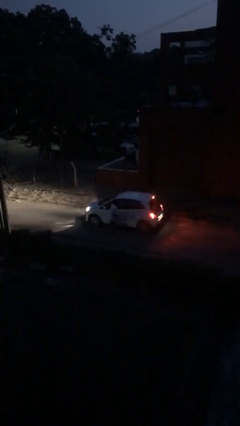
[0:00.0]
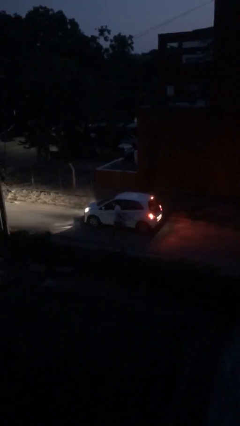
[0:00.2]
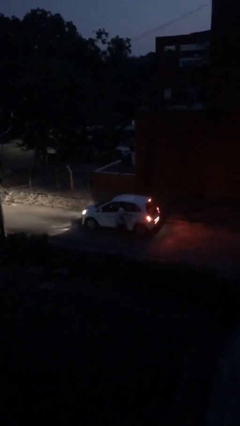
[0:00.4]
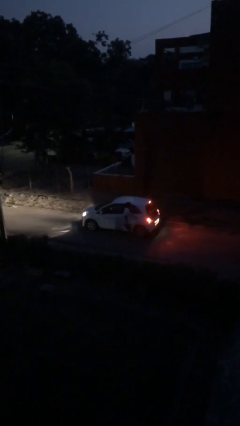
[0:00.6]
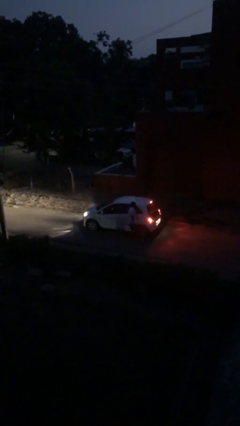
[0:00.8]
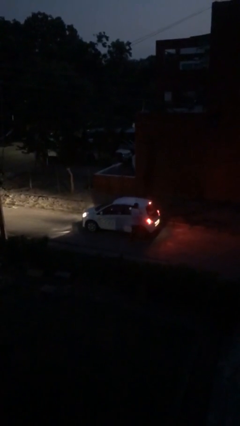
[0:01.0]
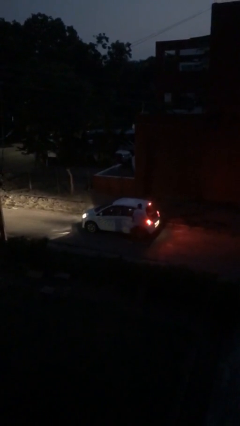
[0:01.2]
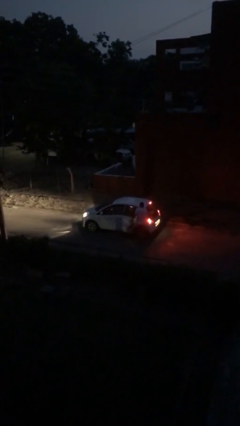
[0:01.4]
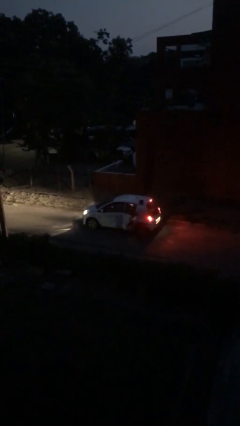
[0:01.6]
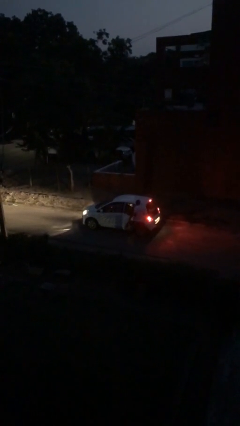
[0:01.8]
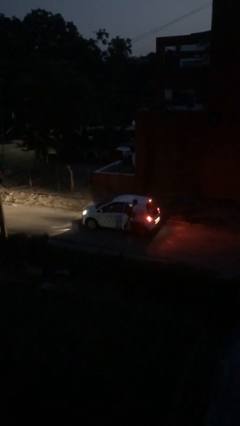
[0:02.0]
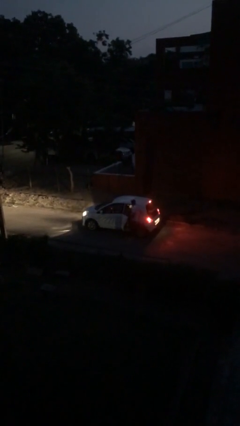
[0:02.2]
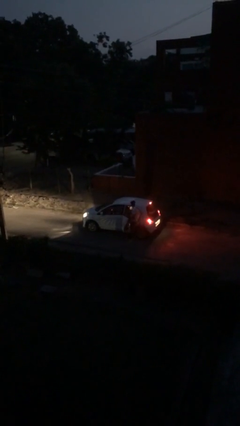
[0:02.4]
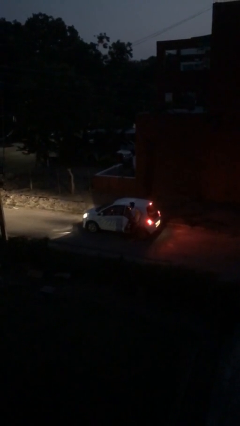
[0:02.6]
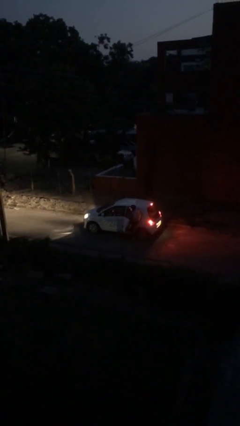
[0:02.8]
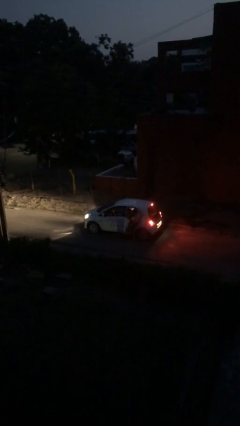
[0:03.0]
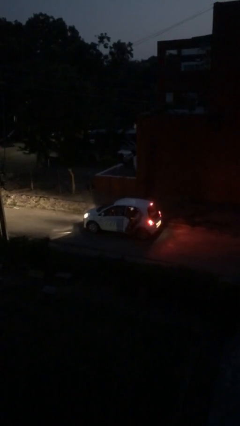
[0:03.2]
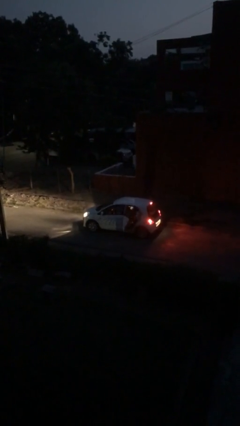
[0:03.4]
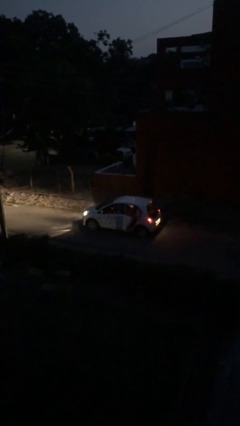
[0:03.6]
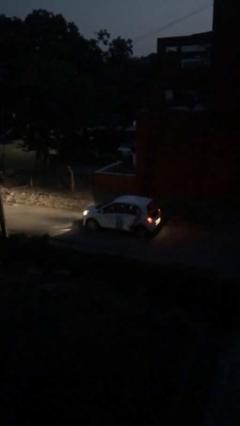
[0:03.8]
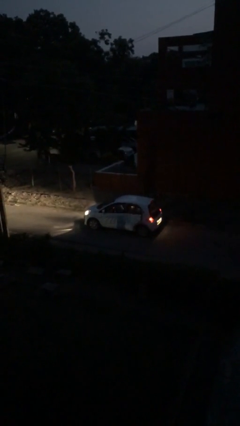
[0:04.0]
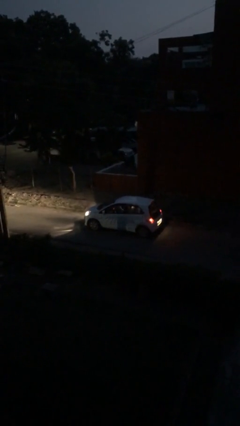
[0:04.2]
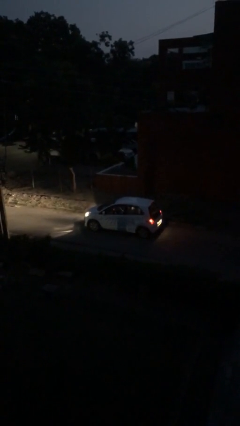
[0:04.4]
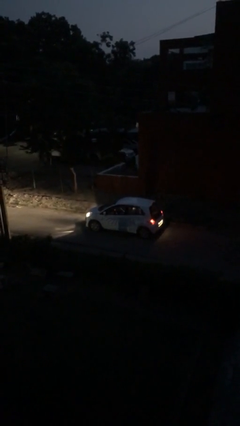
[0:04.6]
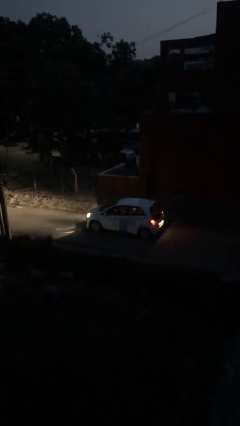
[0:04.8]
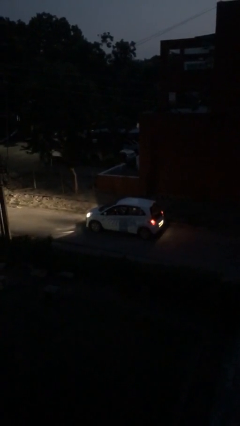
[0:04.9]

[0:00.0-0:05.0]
car picks up person

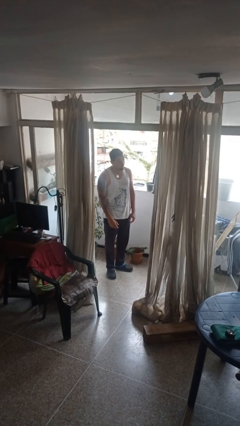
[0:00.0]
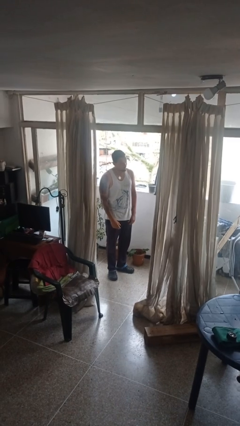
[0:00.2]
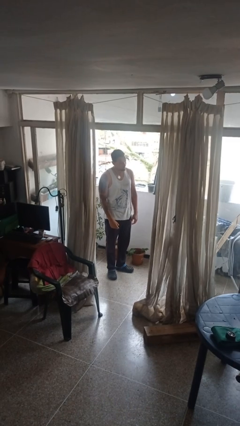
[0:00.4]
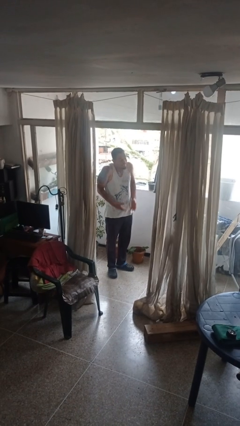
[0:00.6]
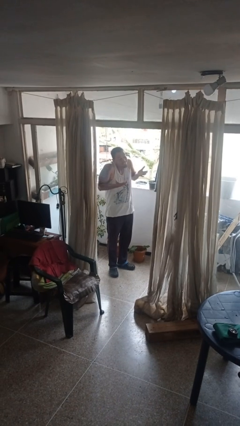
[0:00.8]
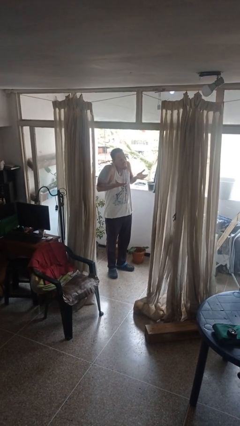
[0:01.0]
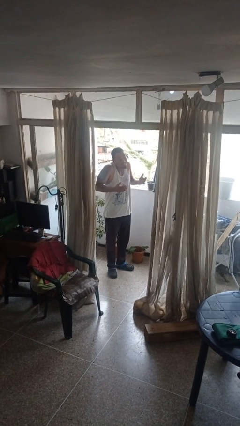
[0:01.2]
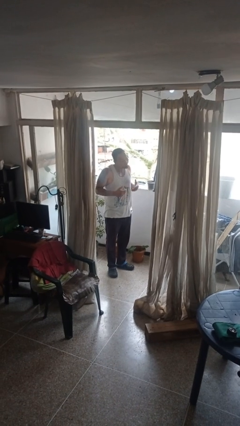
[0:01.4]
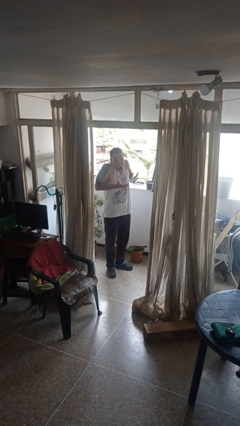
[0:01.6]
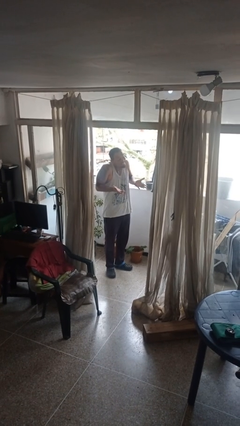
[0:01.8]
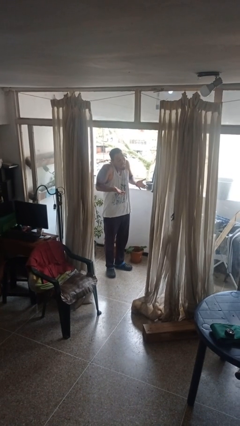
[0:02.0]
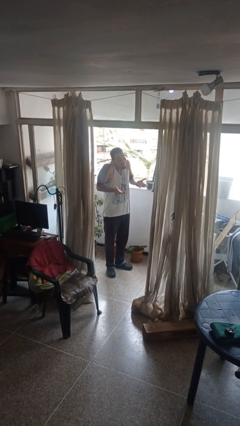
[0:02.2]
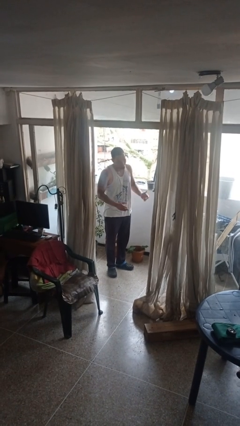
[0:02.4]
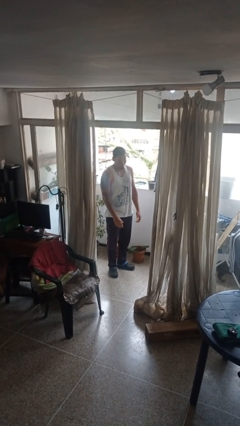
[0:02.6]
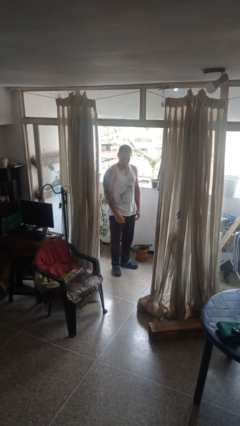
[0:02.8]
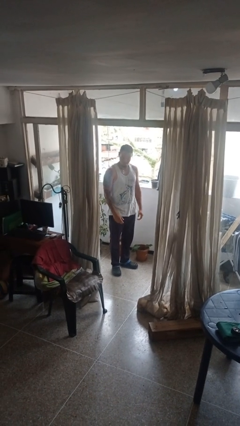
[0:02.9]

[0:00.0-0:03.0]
person shrugs

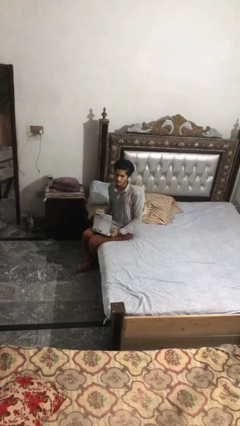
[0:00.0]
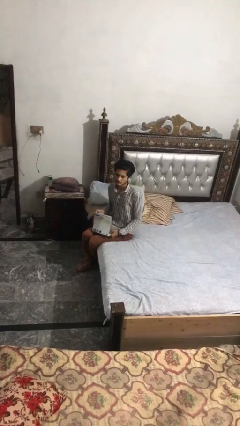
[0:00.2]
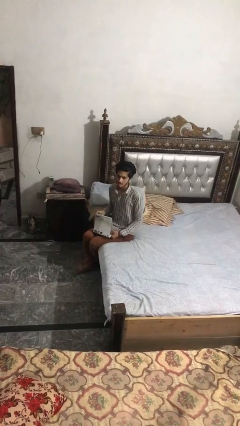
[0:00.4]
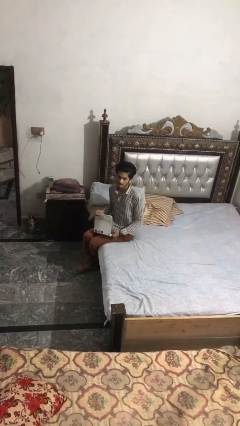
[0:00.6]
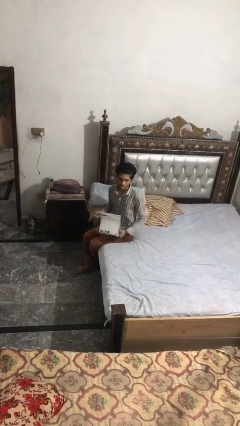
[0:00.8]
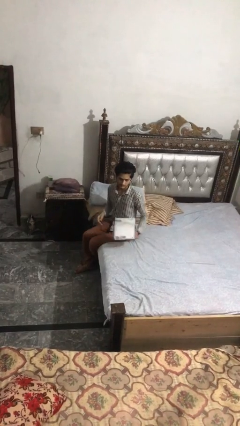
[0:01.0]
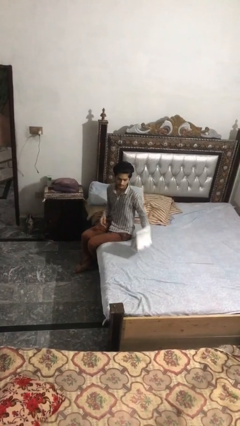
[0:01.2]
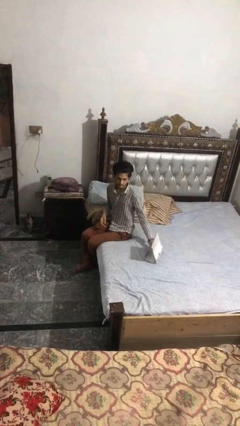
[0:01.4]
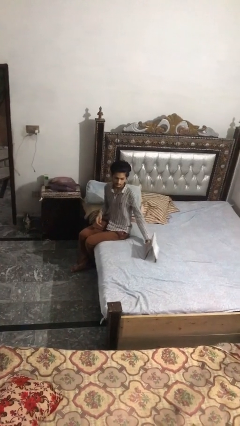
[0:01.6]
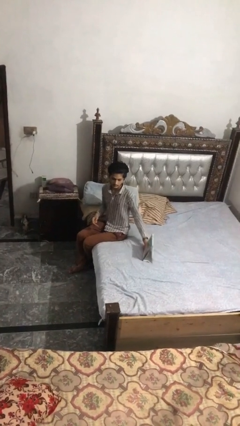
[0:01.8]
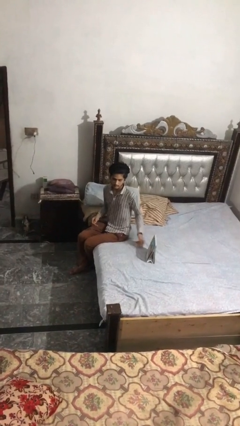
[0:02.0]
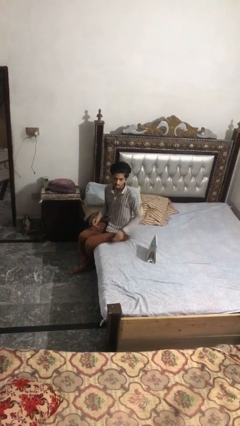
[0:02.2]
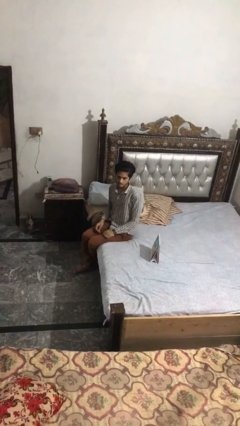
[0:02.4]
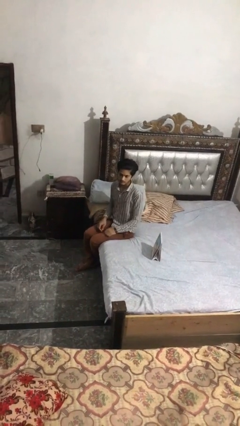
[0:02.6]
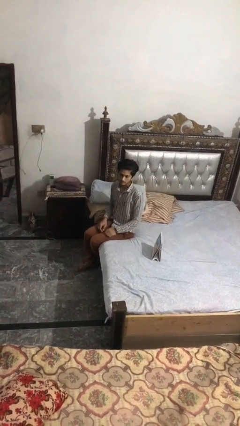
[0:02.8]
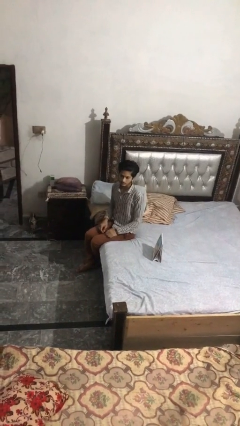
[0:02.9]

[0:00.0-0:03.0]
person puts down object on bed

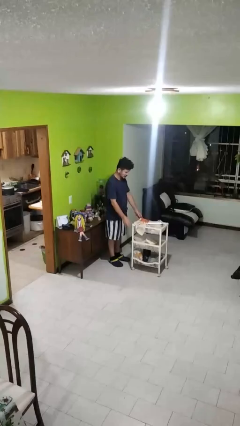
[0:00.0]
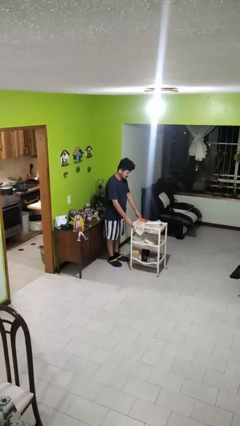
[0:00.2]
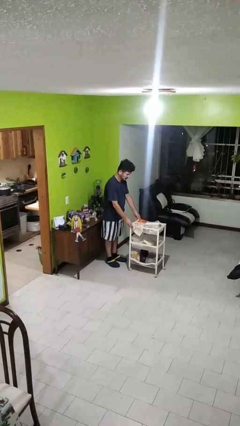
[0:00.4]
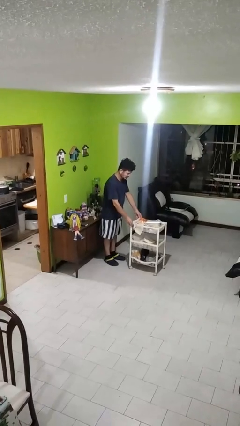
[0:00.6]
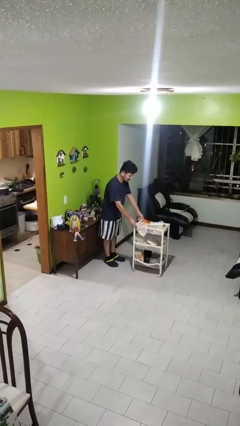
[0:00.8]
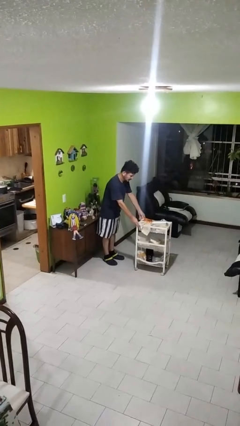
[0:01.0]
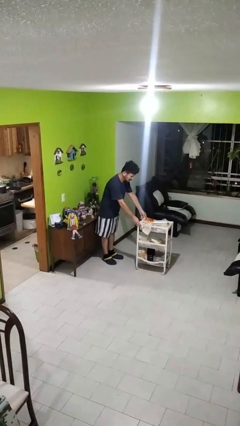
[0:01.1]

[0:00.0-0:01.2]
person pushes wheeled cart

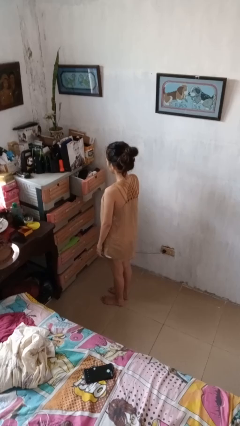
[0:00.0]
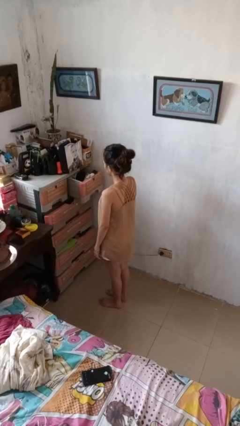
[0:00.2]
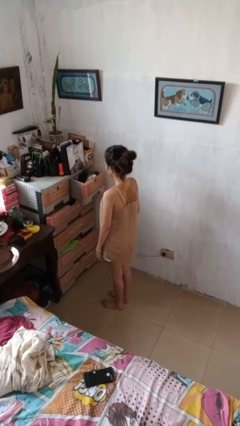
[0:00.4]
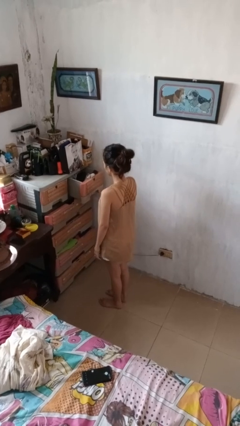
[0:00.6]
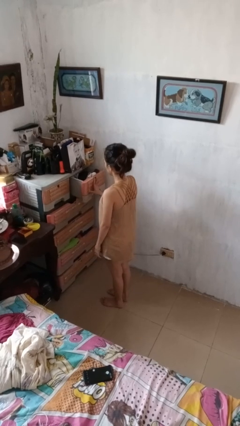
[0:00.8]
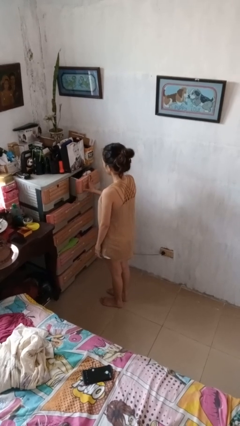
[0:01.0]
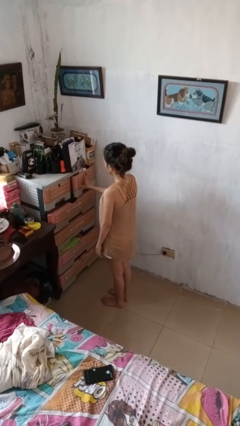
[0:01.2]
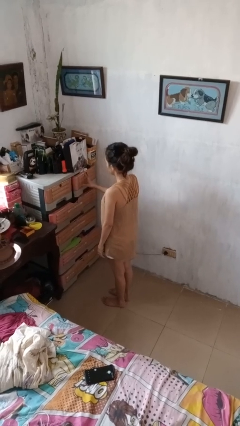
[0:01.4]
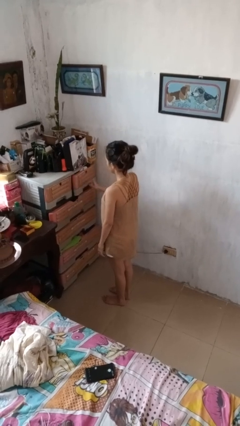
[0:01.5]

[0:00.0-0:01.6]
person closes dresser drawer

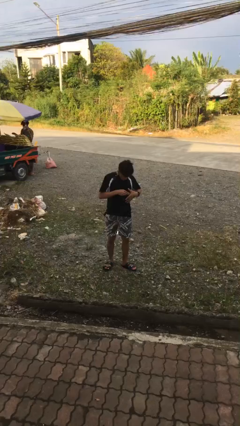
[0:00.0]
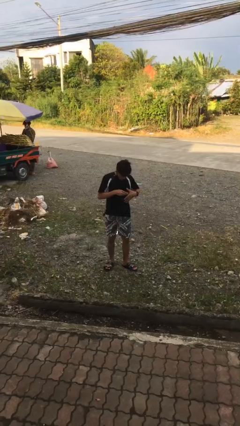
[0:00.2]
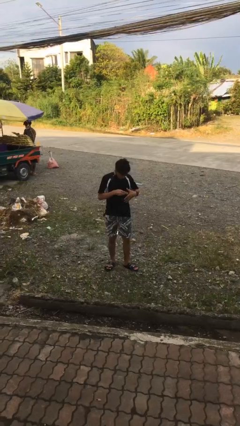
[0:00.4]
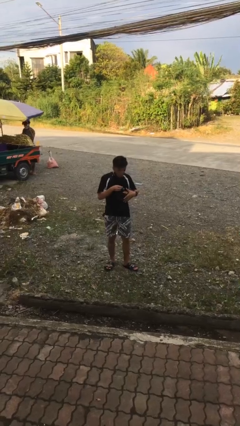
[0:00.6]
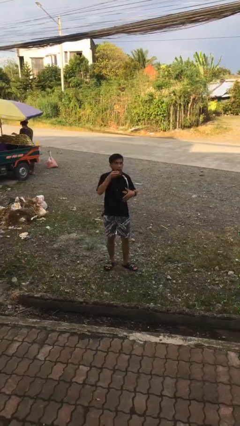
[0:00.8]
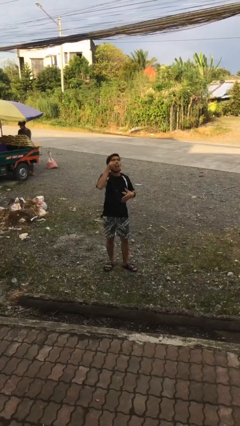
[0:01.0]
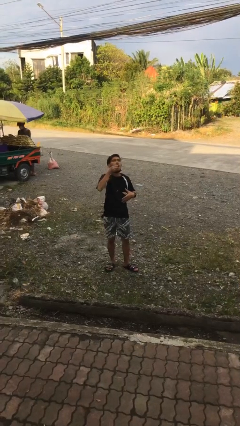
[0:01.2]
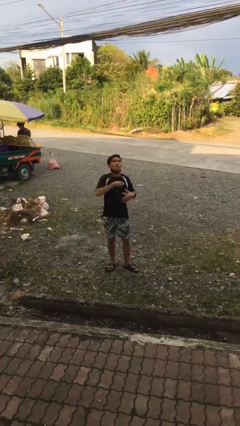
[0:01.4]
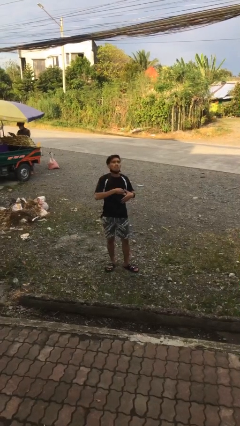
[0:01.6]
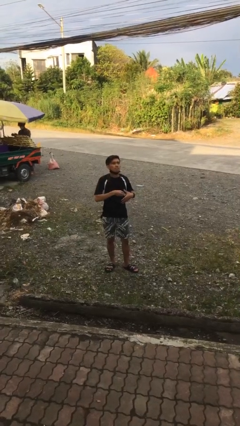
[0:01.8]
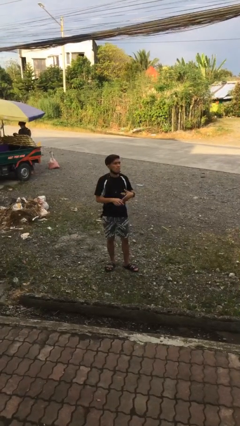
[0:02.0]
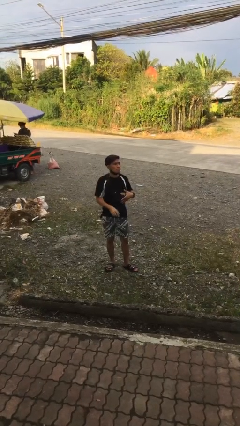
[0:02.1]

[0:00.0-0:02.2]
person eats snack from bag

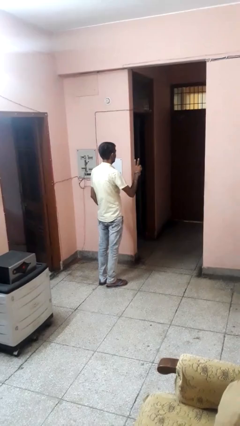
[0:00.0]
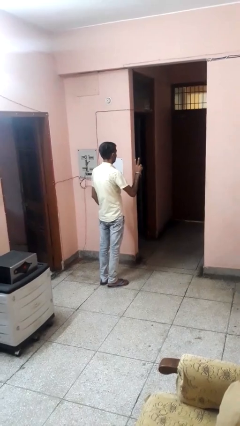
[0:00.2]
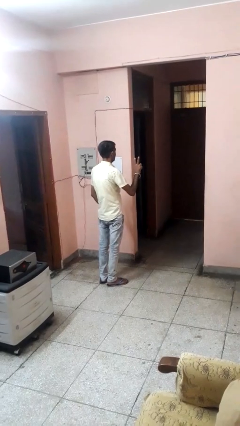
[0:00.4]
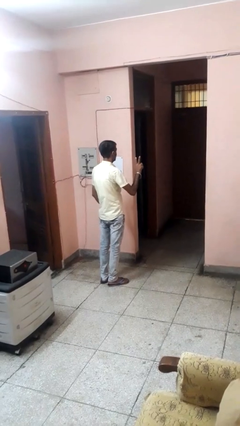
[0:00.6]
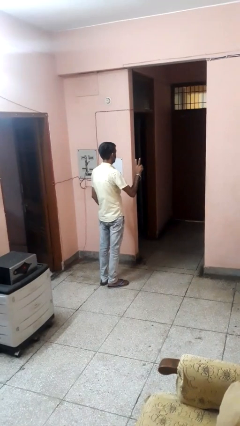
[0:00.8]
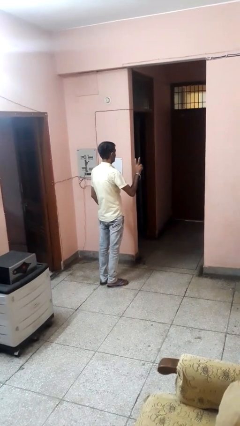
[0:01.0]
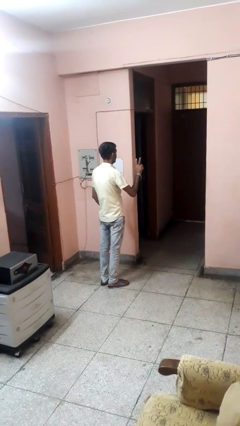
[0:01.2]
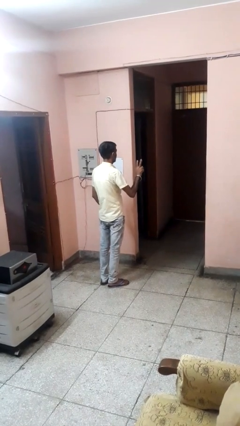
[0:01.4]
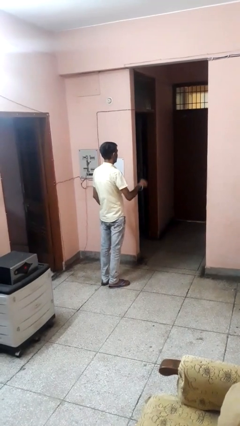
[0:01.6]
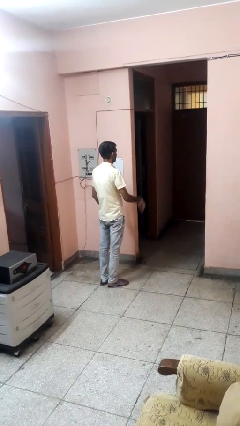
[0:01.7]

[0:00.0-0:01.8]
person gestures peace
